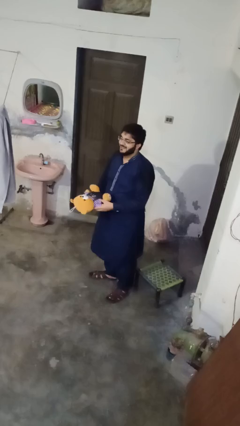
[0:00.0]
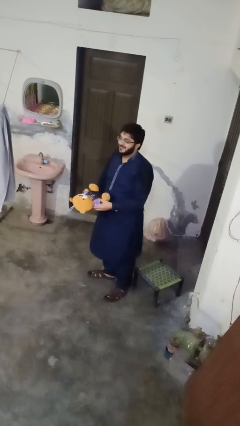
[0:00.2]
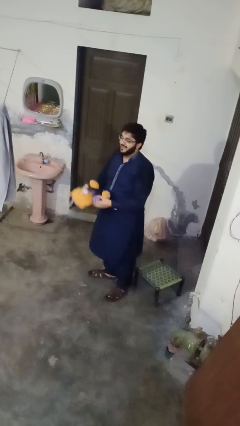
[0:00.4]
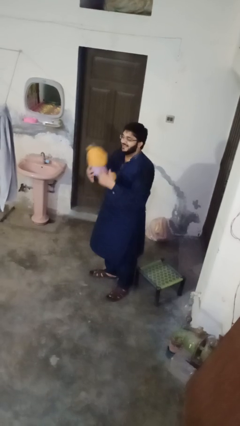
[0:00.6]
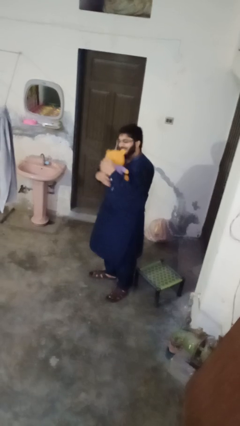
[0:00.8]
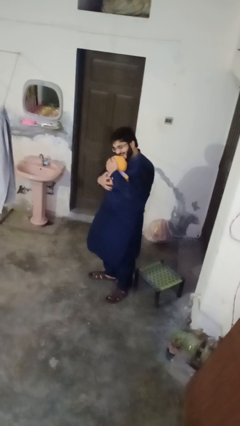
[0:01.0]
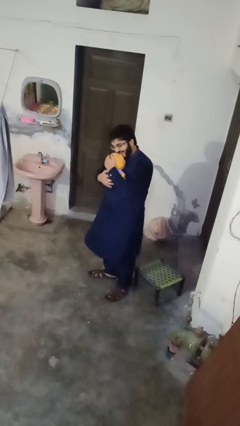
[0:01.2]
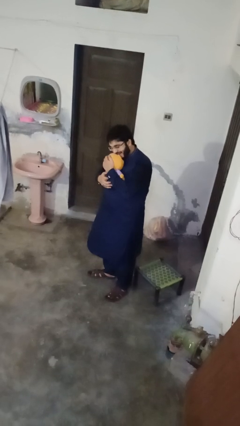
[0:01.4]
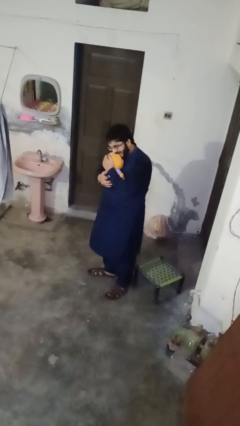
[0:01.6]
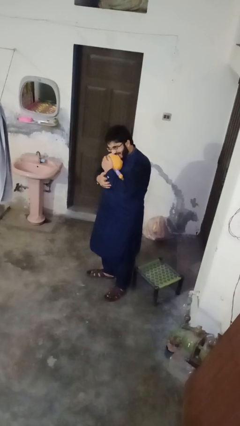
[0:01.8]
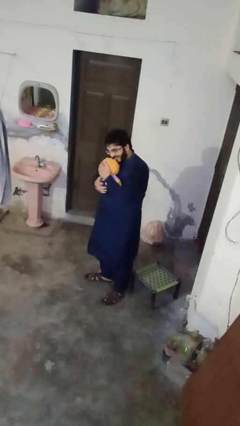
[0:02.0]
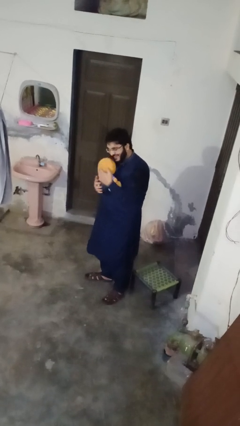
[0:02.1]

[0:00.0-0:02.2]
person hugs stuffed animal

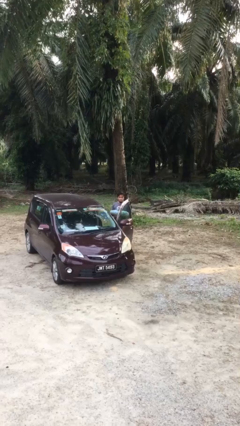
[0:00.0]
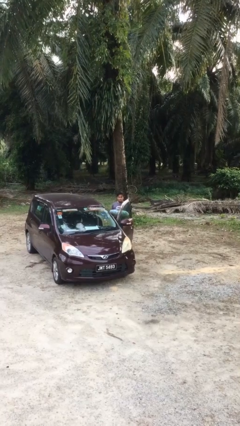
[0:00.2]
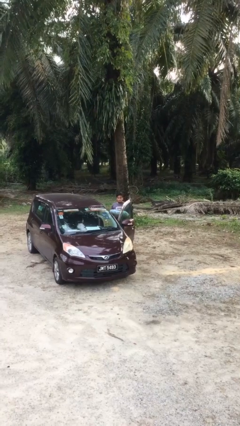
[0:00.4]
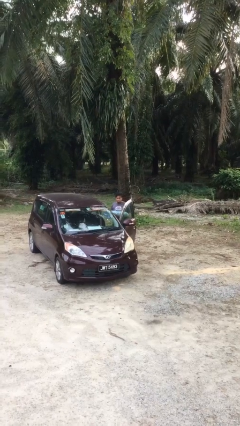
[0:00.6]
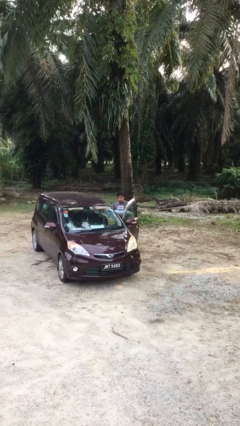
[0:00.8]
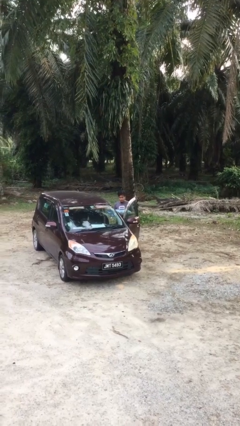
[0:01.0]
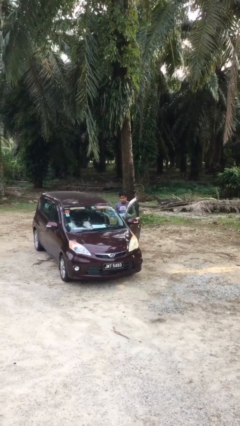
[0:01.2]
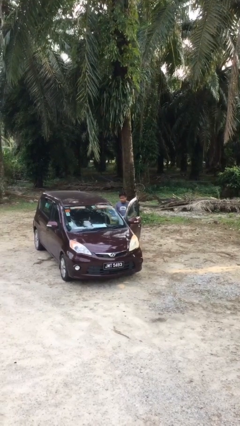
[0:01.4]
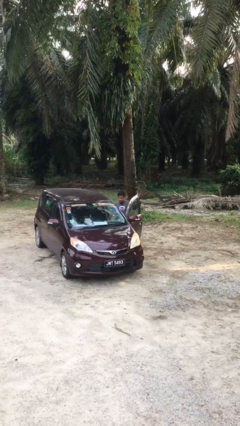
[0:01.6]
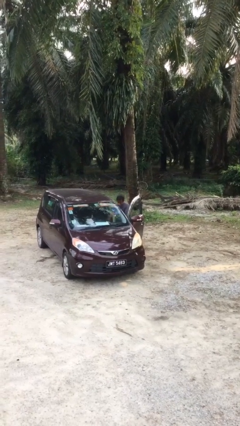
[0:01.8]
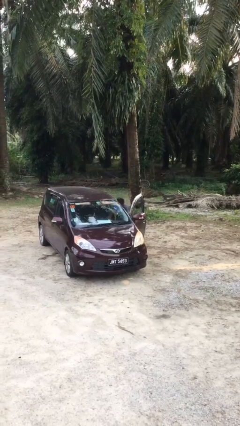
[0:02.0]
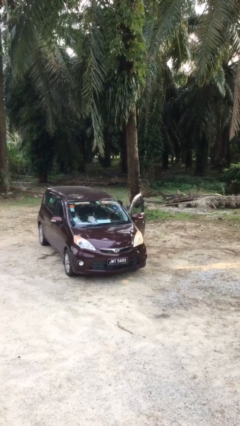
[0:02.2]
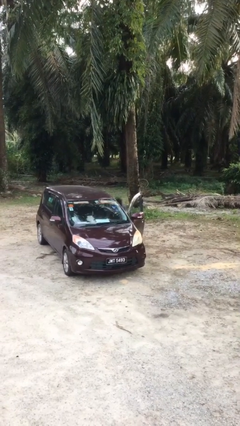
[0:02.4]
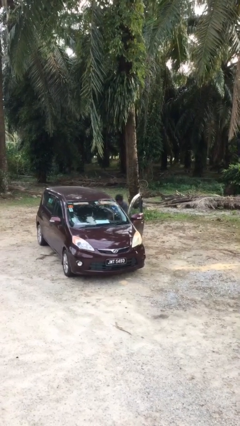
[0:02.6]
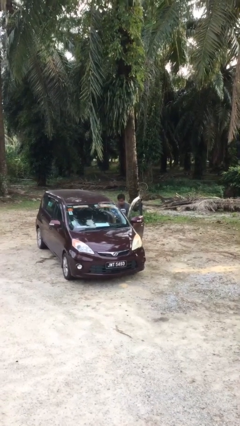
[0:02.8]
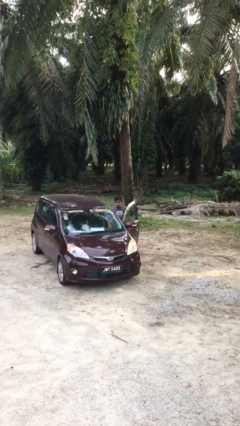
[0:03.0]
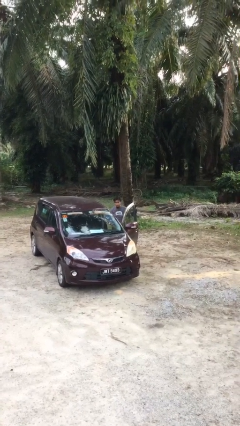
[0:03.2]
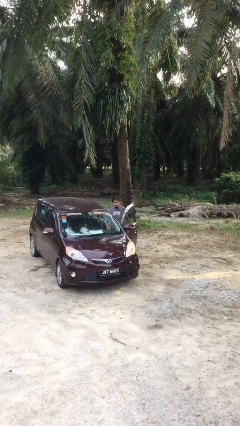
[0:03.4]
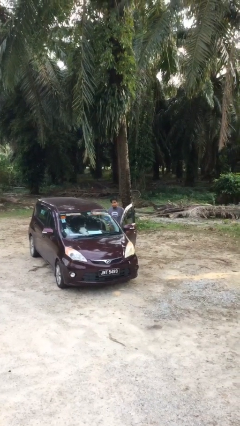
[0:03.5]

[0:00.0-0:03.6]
person loads car

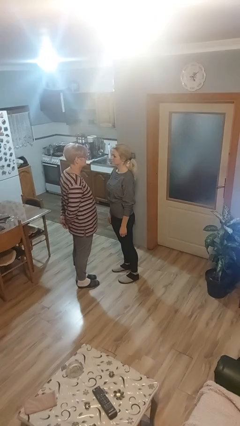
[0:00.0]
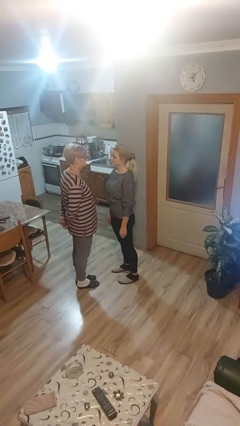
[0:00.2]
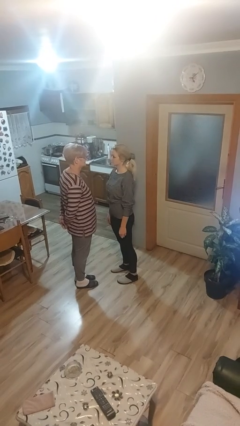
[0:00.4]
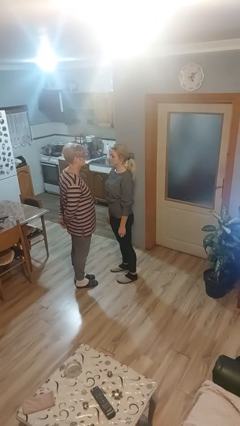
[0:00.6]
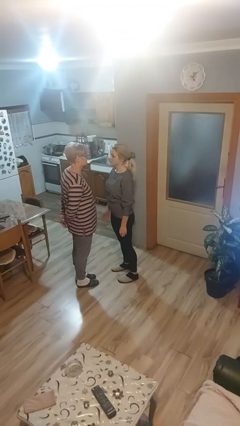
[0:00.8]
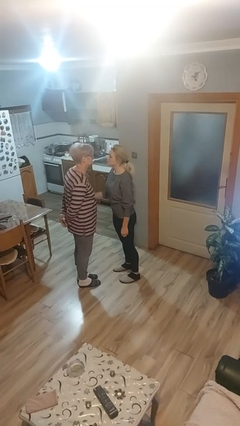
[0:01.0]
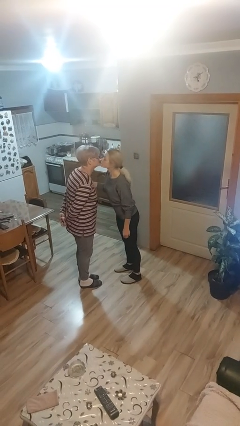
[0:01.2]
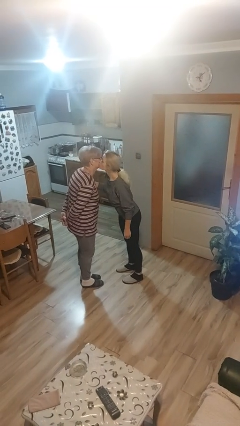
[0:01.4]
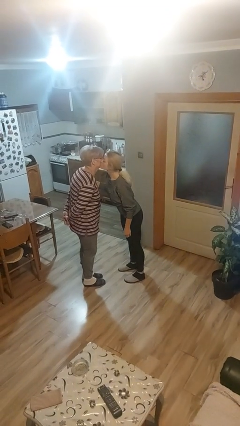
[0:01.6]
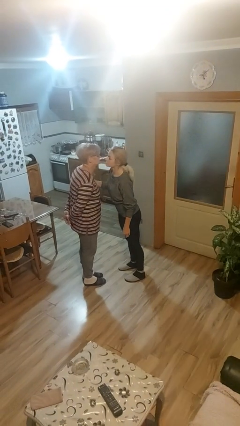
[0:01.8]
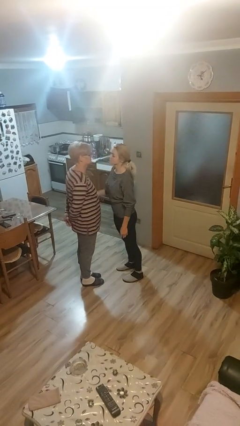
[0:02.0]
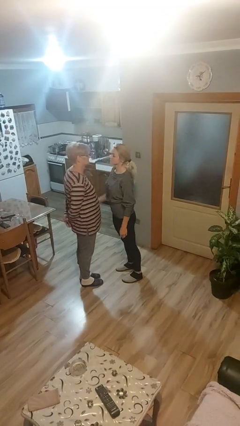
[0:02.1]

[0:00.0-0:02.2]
person kisses cheek of person

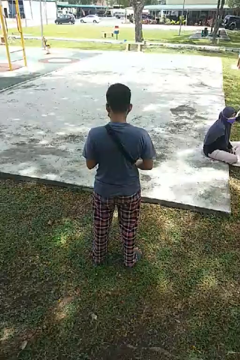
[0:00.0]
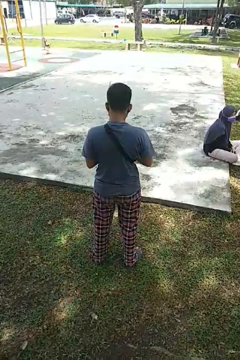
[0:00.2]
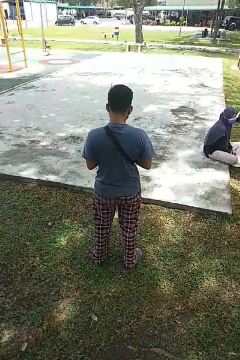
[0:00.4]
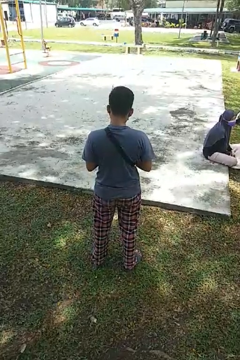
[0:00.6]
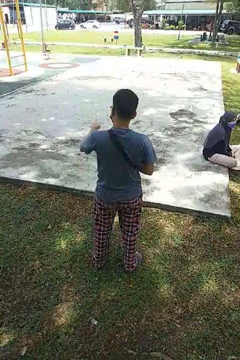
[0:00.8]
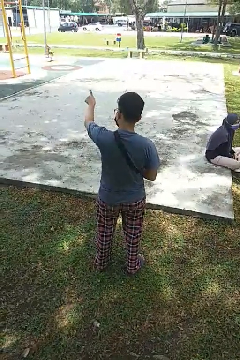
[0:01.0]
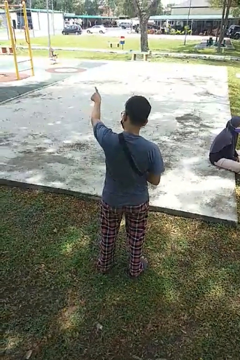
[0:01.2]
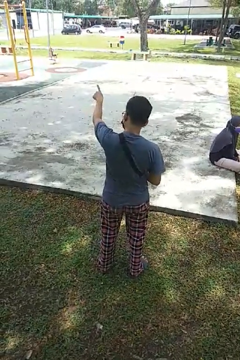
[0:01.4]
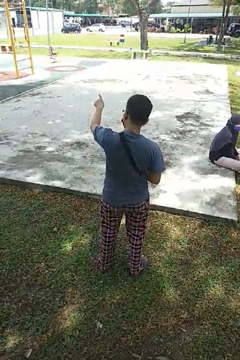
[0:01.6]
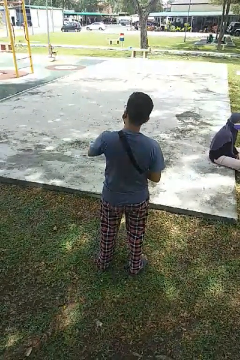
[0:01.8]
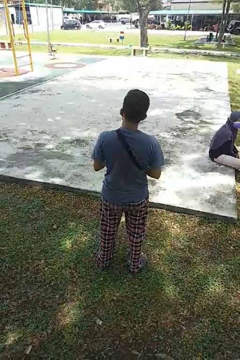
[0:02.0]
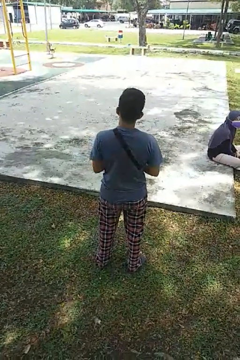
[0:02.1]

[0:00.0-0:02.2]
person points at person

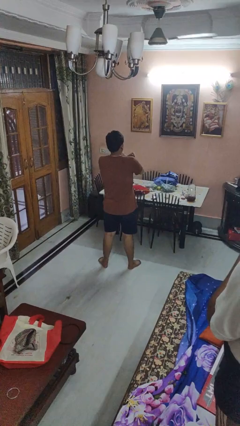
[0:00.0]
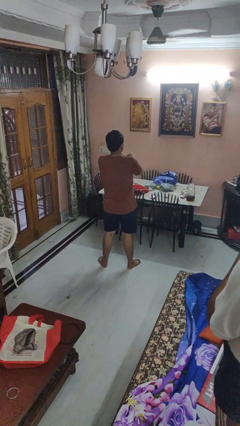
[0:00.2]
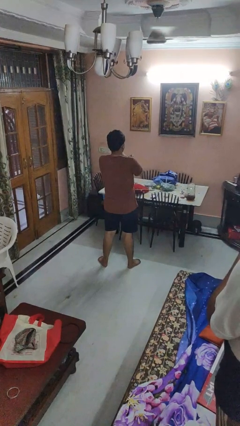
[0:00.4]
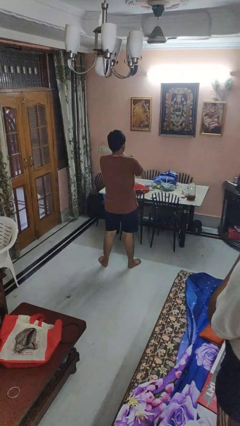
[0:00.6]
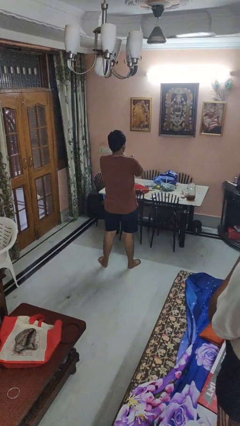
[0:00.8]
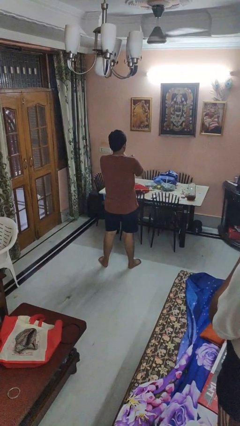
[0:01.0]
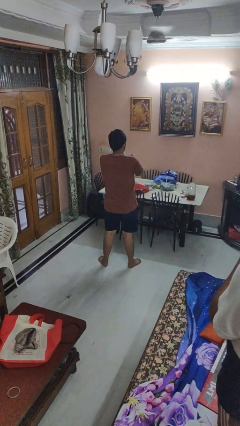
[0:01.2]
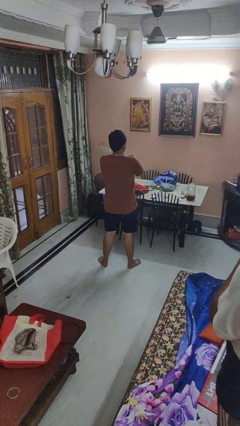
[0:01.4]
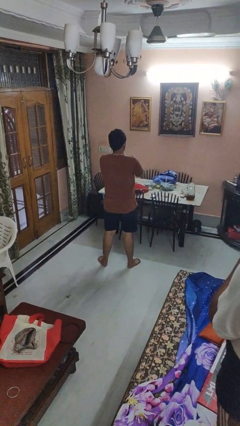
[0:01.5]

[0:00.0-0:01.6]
person gestures arms x

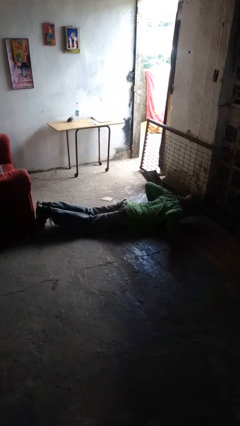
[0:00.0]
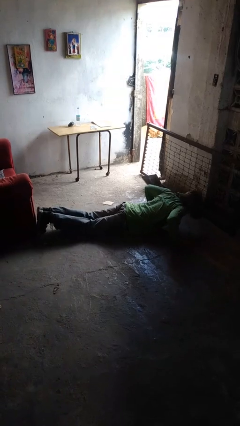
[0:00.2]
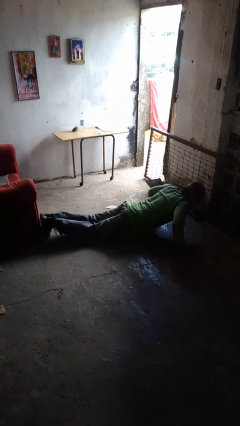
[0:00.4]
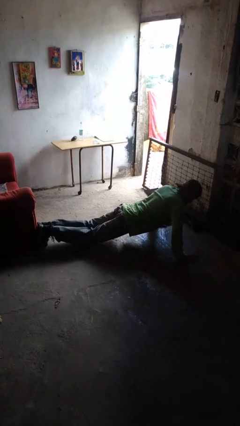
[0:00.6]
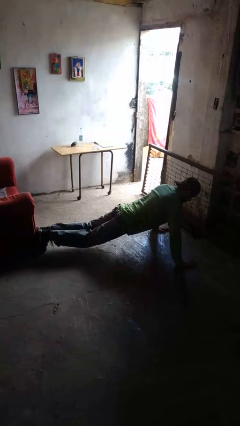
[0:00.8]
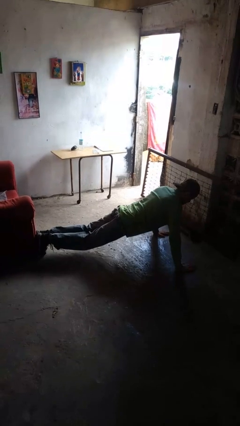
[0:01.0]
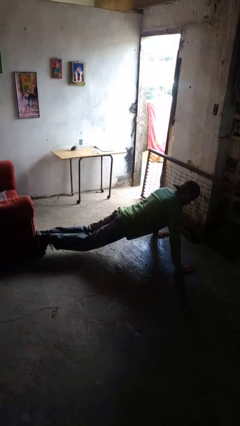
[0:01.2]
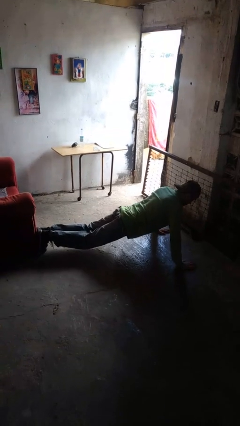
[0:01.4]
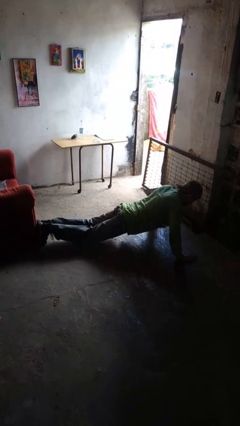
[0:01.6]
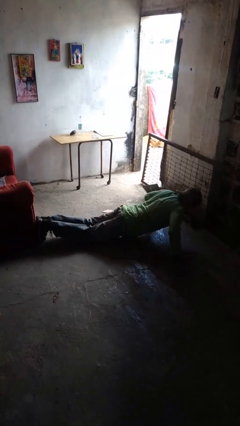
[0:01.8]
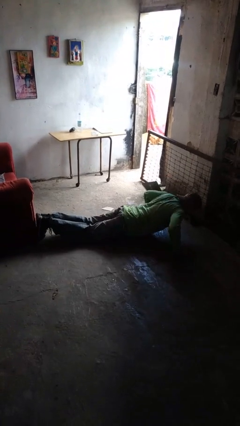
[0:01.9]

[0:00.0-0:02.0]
person exercises with pushup

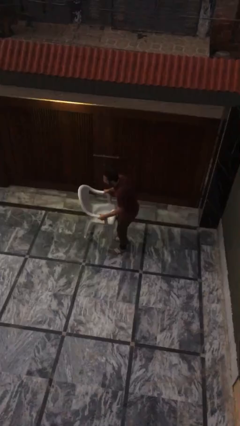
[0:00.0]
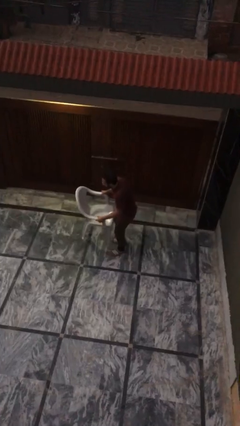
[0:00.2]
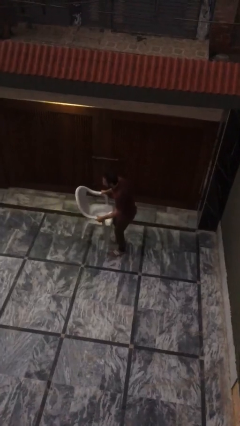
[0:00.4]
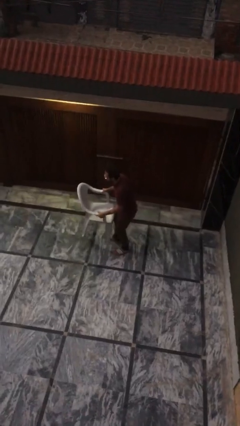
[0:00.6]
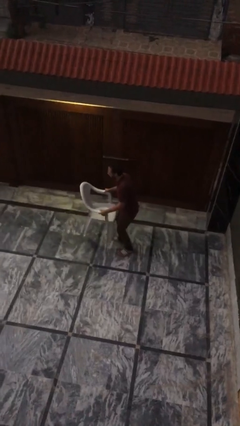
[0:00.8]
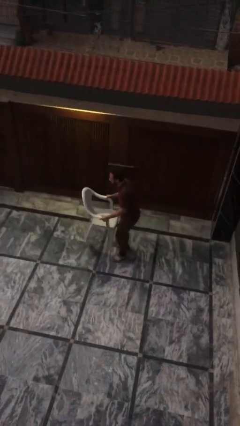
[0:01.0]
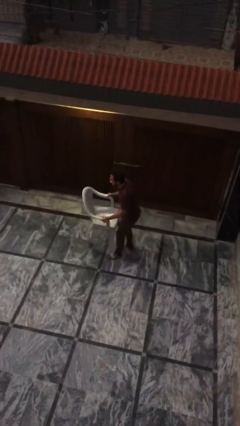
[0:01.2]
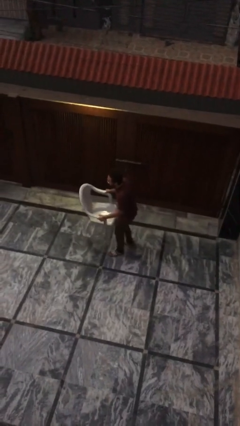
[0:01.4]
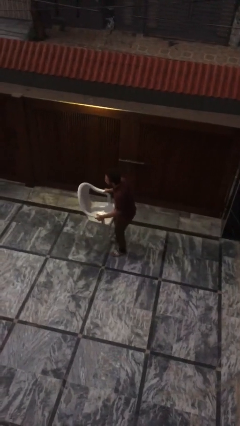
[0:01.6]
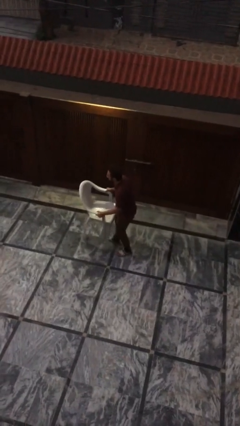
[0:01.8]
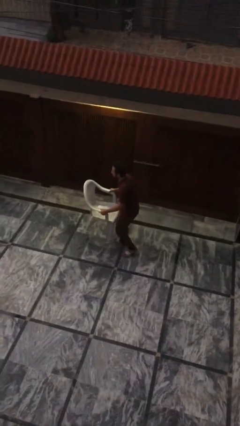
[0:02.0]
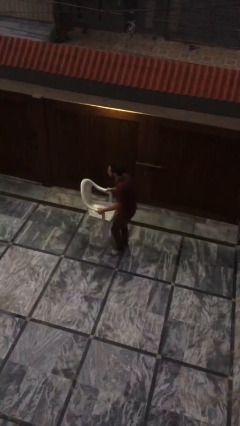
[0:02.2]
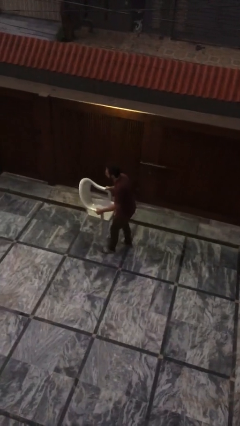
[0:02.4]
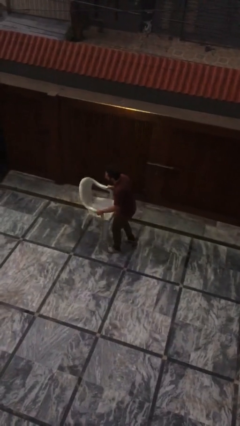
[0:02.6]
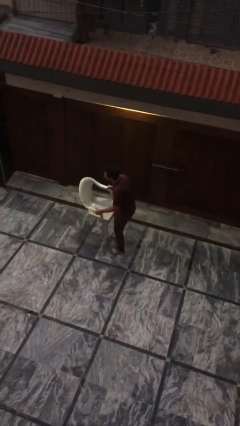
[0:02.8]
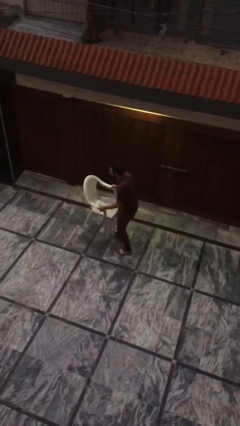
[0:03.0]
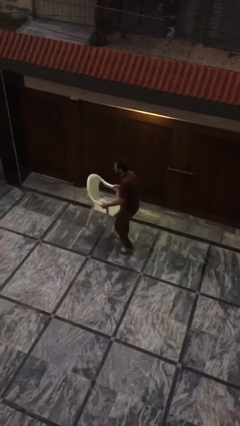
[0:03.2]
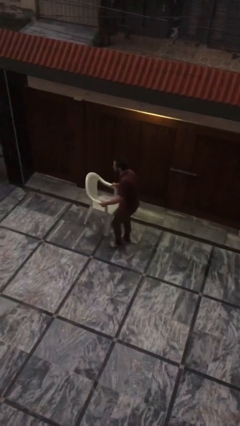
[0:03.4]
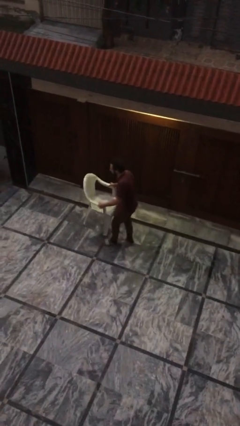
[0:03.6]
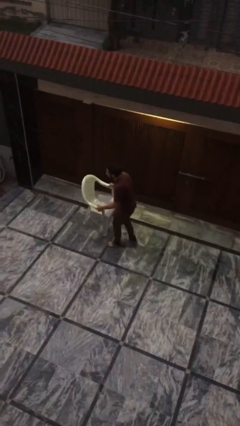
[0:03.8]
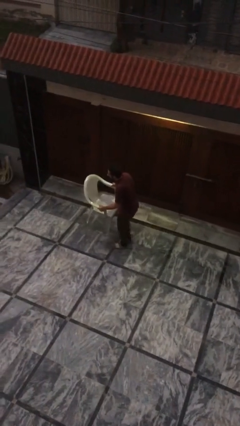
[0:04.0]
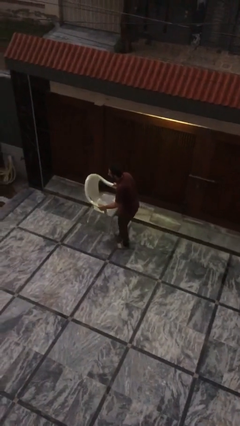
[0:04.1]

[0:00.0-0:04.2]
person carries heavy object
